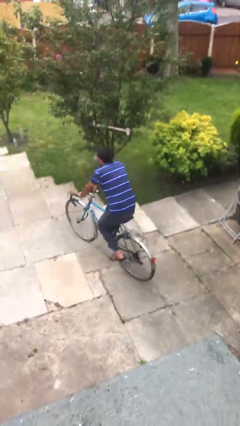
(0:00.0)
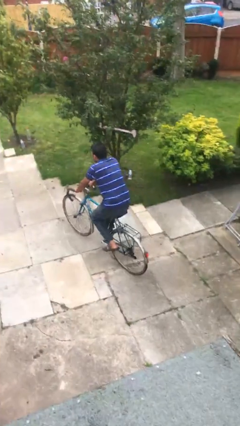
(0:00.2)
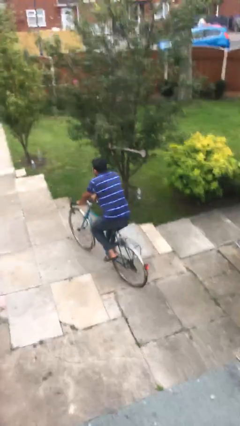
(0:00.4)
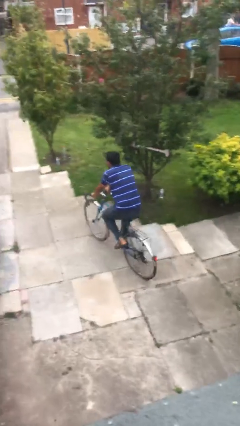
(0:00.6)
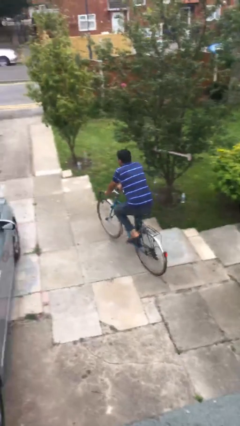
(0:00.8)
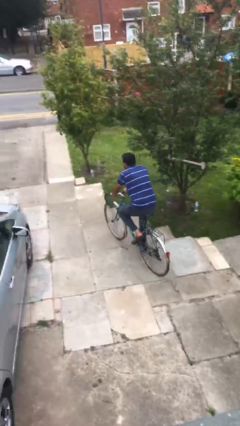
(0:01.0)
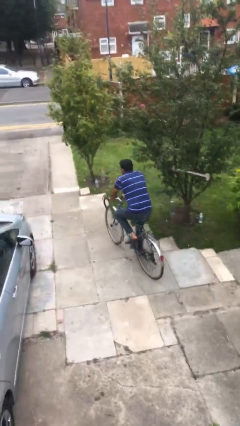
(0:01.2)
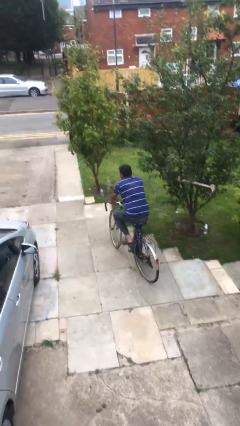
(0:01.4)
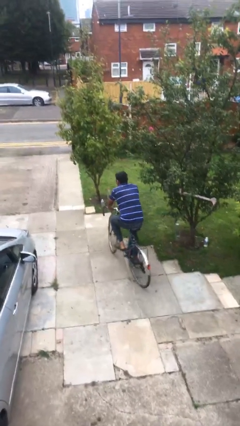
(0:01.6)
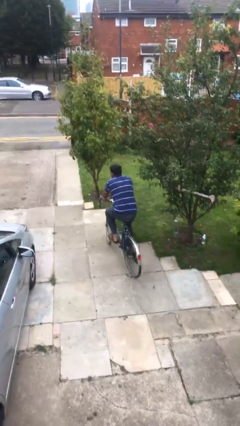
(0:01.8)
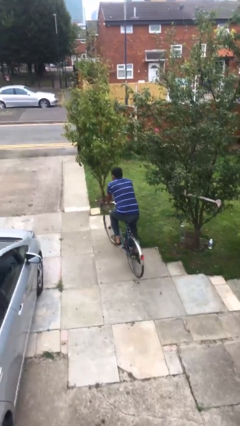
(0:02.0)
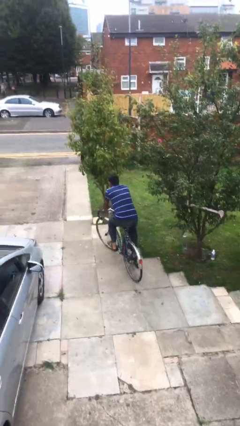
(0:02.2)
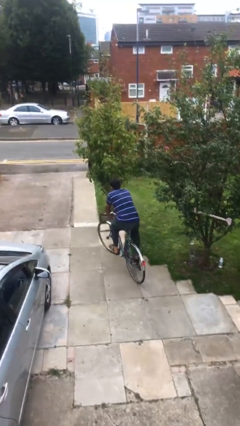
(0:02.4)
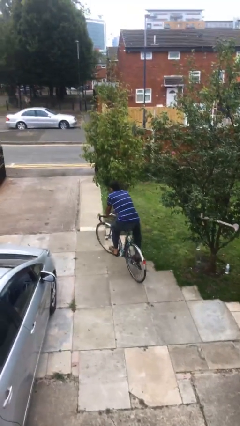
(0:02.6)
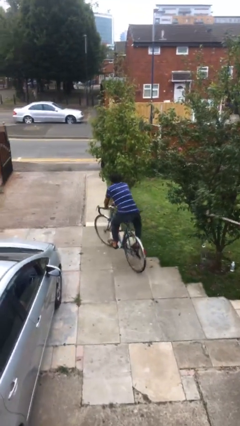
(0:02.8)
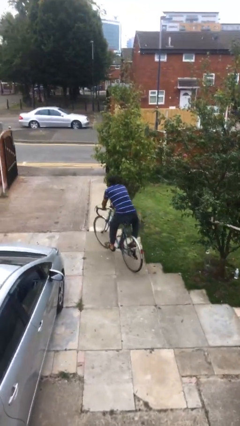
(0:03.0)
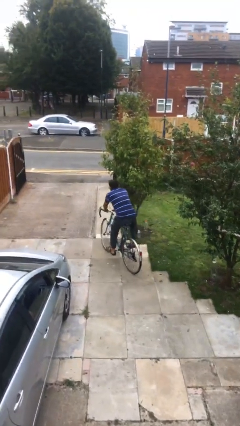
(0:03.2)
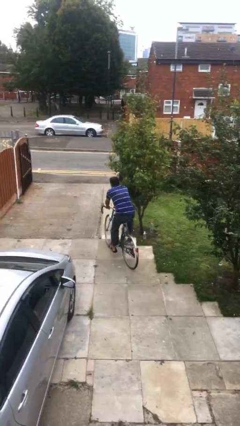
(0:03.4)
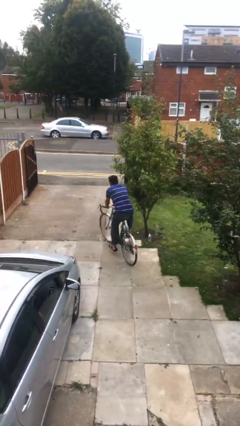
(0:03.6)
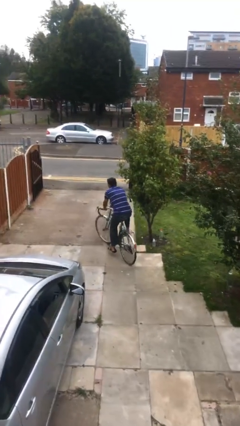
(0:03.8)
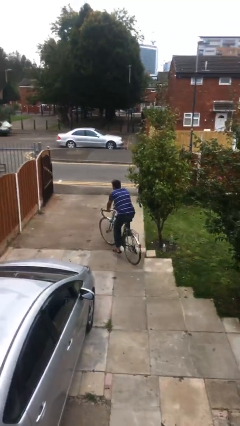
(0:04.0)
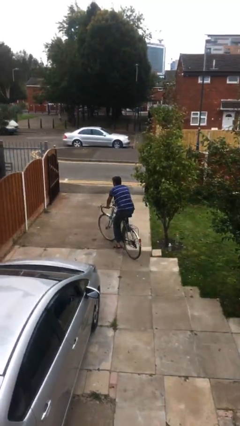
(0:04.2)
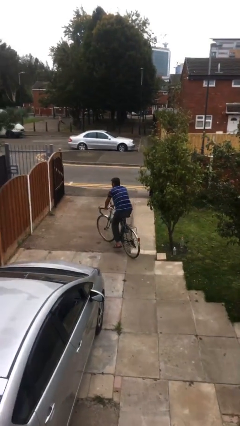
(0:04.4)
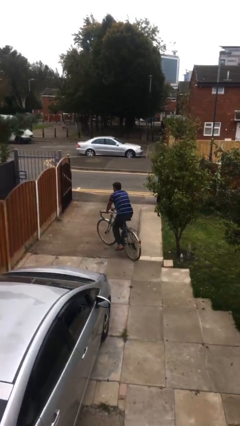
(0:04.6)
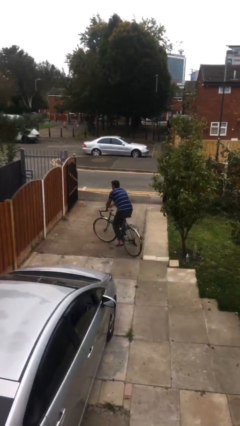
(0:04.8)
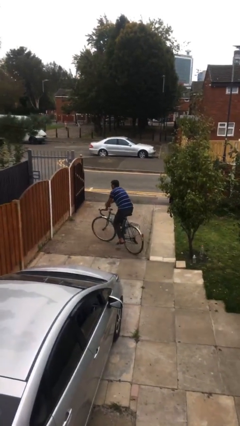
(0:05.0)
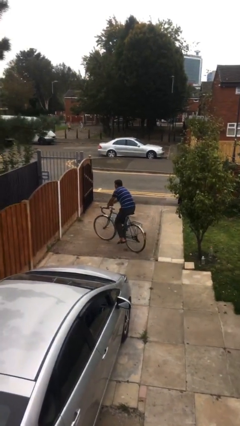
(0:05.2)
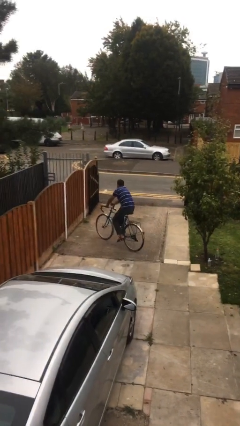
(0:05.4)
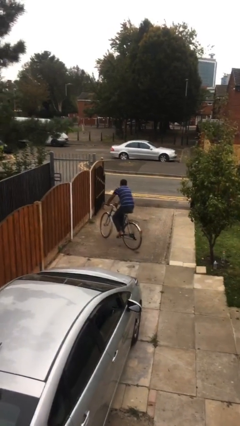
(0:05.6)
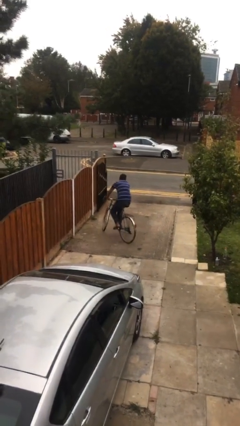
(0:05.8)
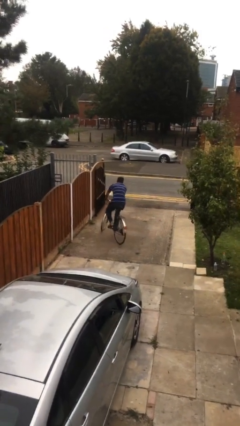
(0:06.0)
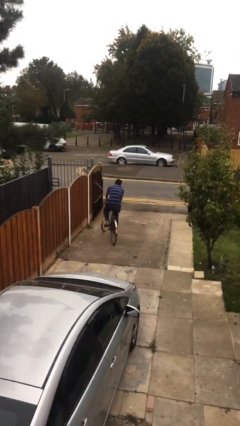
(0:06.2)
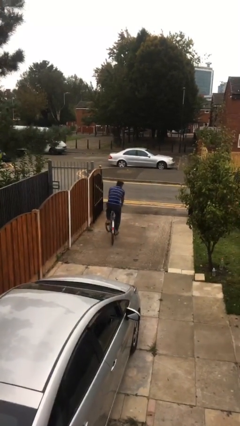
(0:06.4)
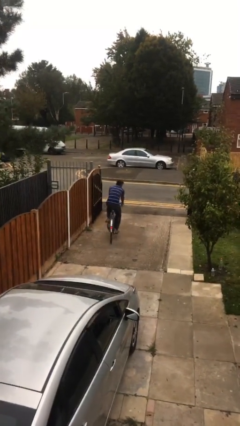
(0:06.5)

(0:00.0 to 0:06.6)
person rides bicycle

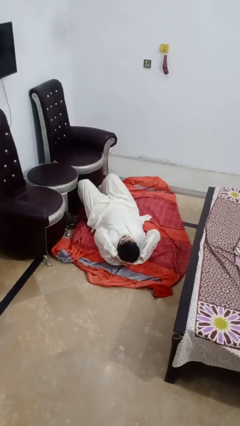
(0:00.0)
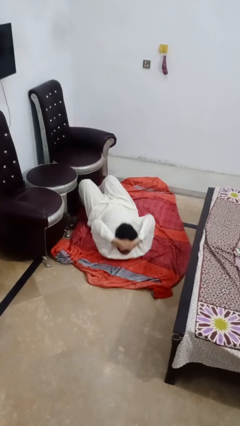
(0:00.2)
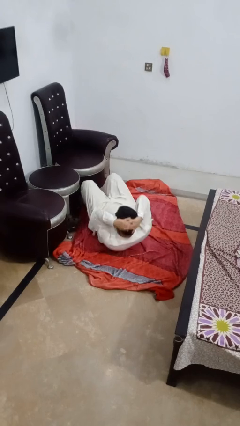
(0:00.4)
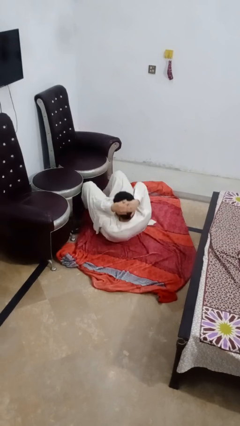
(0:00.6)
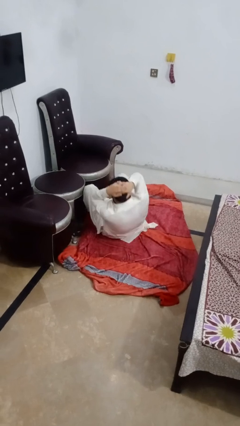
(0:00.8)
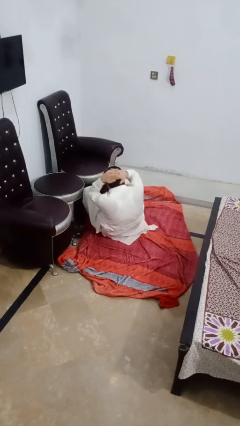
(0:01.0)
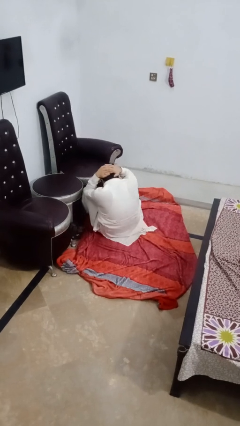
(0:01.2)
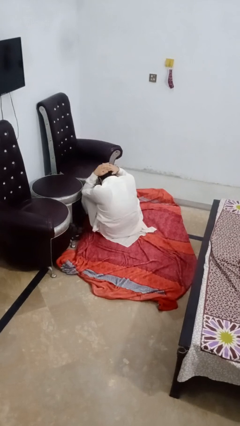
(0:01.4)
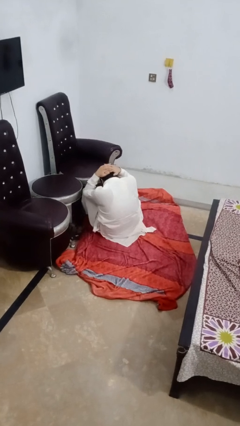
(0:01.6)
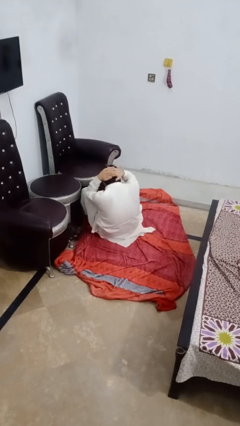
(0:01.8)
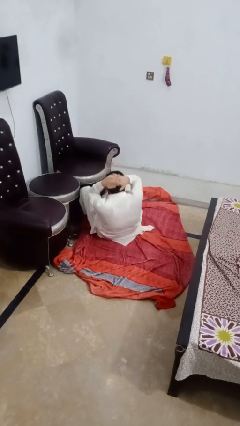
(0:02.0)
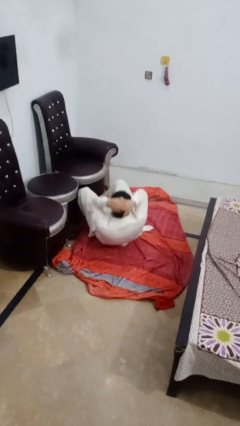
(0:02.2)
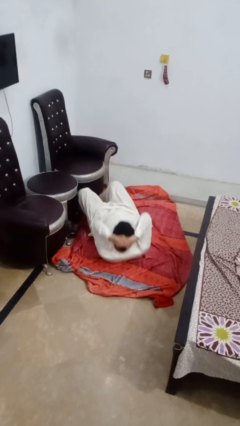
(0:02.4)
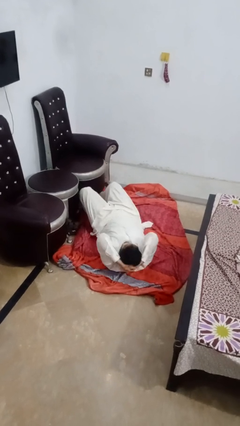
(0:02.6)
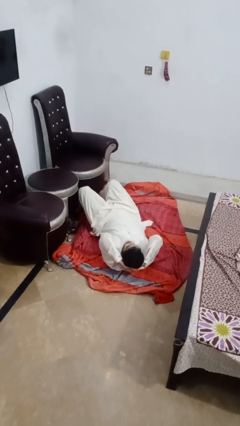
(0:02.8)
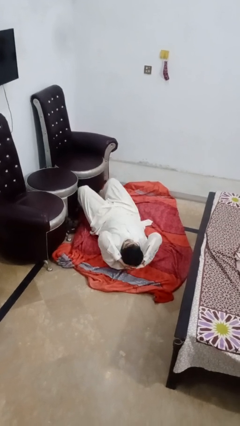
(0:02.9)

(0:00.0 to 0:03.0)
person exercises with situp

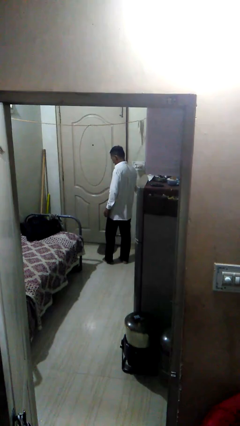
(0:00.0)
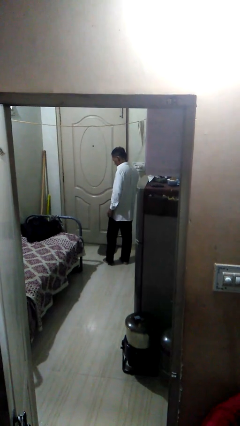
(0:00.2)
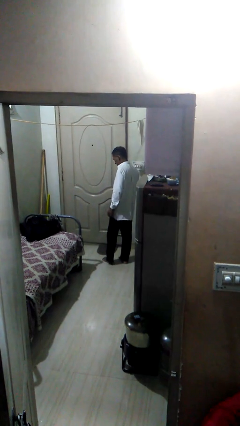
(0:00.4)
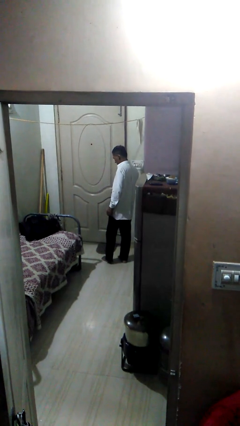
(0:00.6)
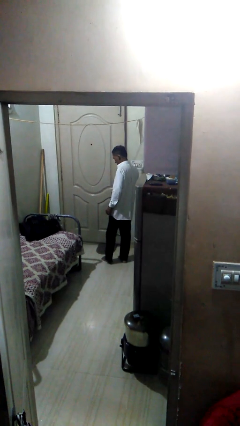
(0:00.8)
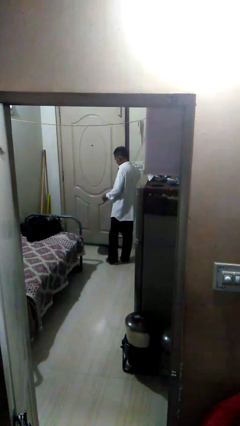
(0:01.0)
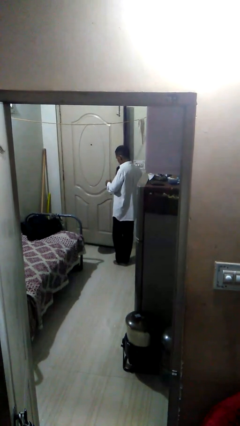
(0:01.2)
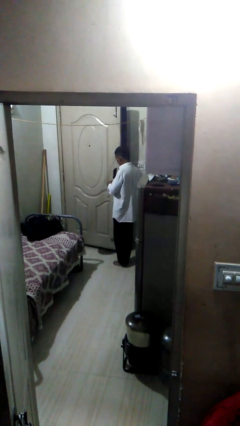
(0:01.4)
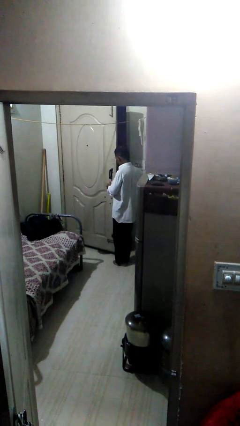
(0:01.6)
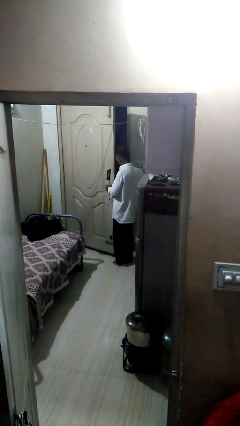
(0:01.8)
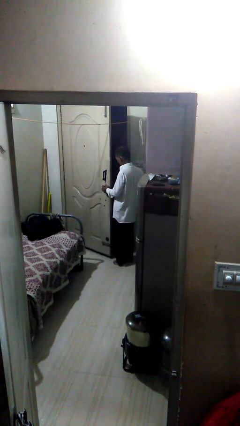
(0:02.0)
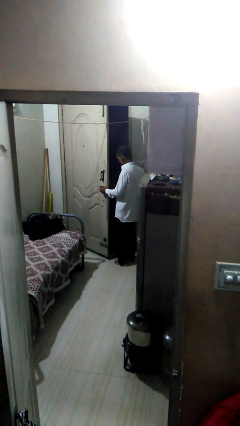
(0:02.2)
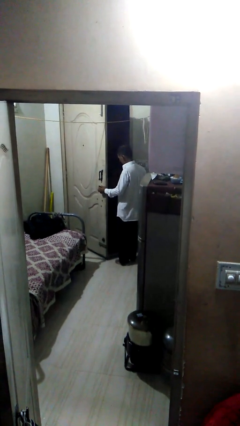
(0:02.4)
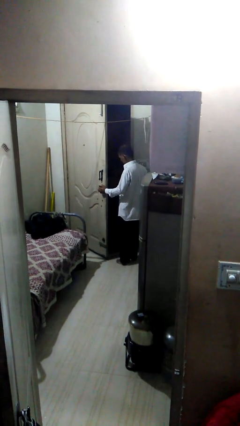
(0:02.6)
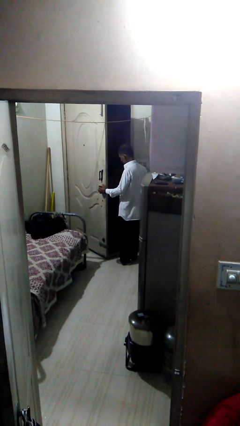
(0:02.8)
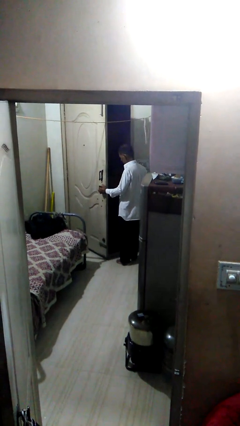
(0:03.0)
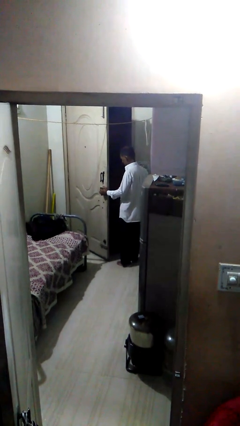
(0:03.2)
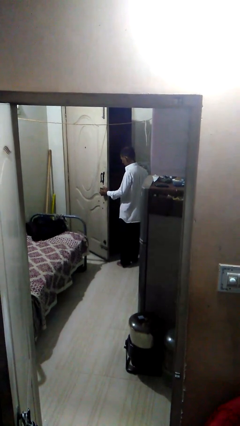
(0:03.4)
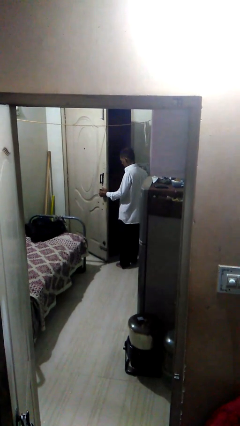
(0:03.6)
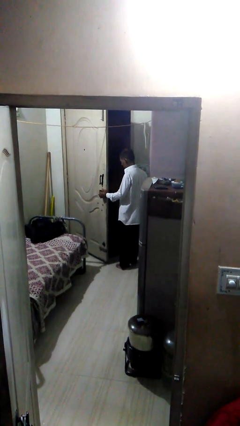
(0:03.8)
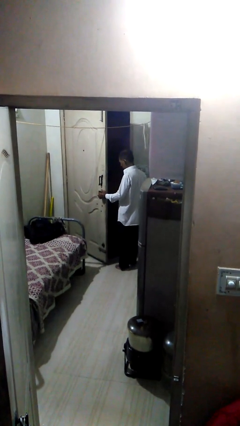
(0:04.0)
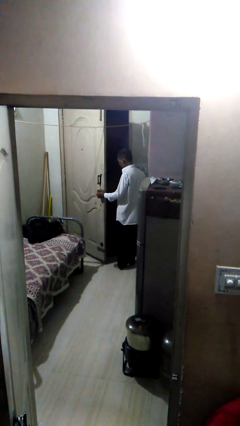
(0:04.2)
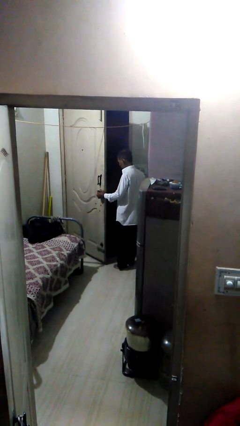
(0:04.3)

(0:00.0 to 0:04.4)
person opens facility door

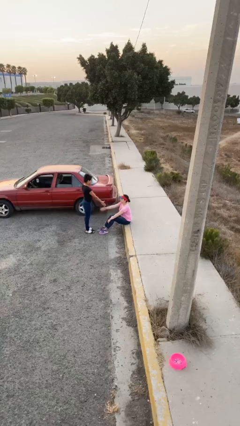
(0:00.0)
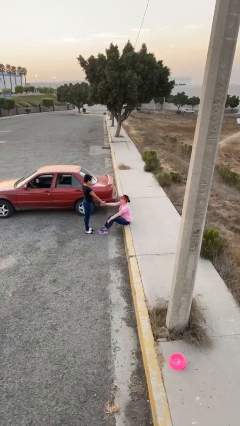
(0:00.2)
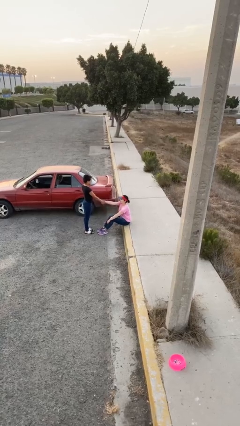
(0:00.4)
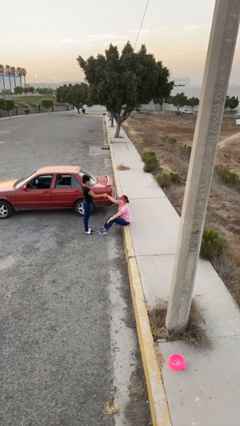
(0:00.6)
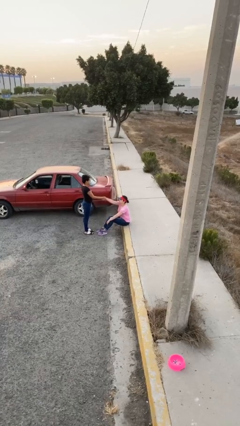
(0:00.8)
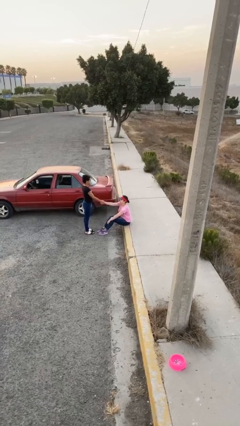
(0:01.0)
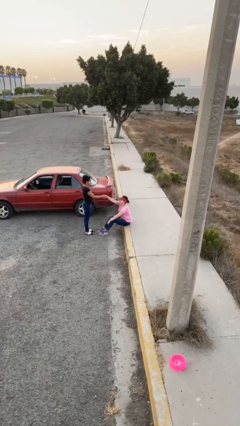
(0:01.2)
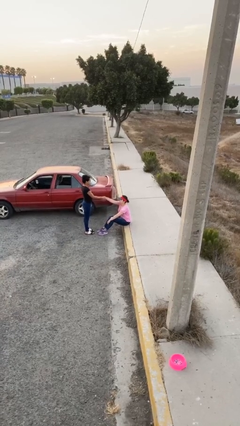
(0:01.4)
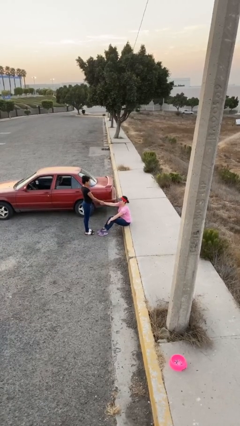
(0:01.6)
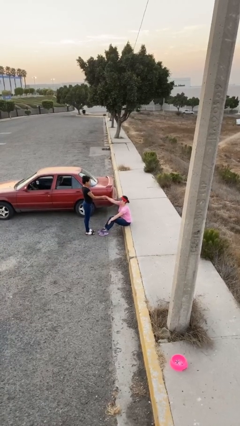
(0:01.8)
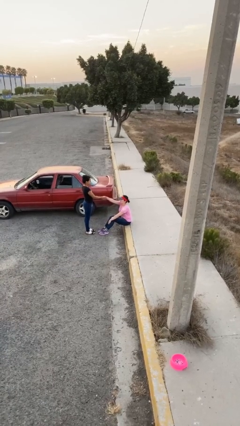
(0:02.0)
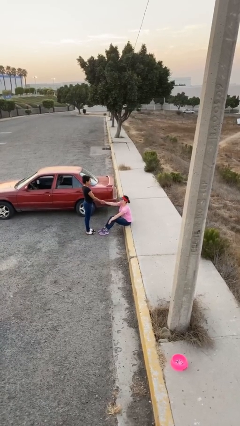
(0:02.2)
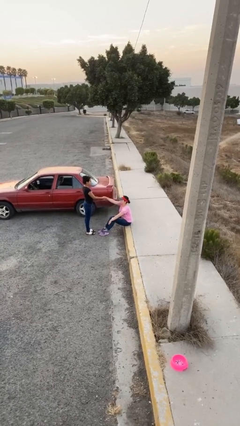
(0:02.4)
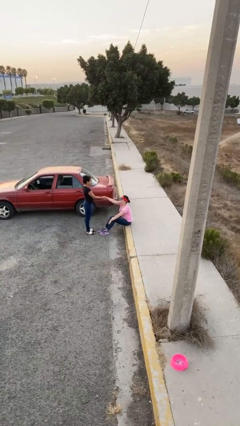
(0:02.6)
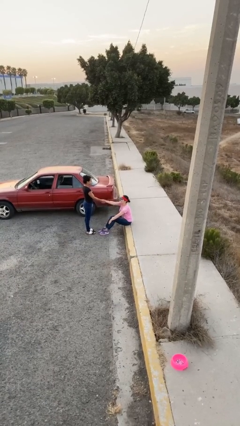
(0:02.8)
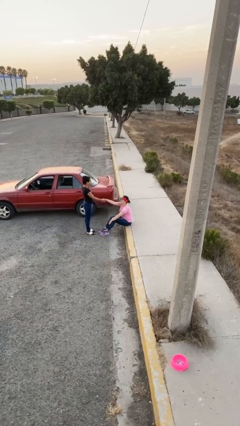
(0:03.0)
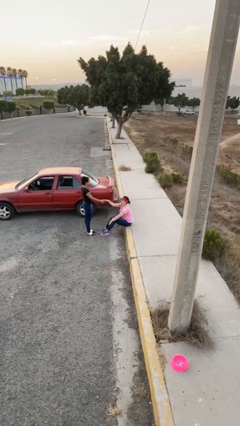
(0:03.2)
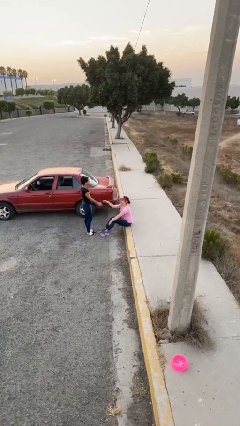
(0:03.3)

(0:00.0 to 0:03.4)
person shakes hand

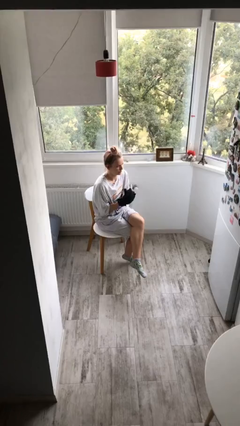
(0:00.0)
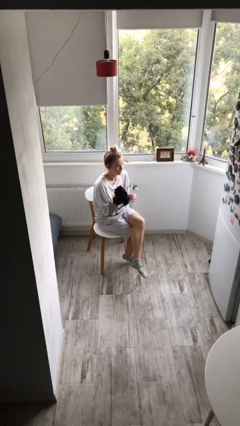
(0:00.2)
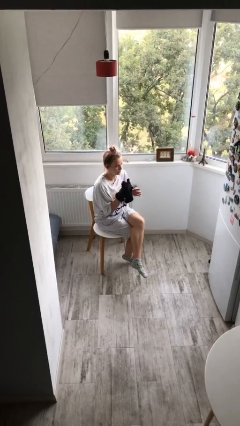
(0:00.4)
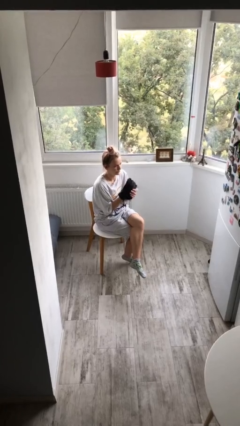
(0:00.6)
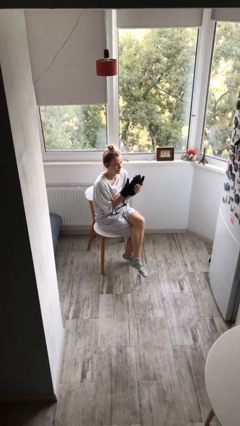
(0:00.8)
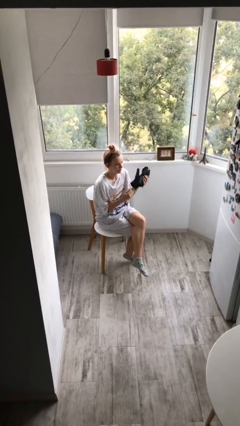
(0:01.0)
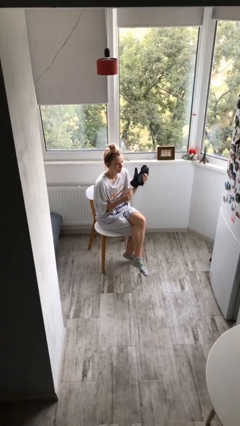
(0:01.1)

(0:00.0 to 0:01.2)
person takes off gloves
